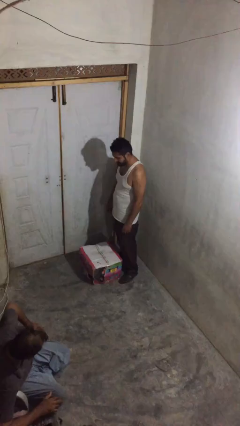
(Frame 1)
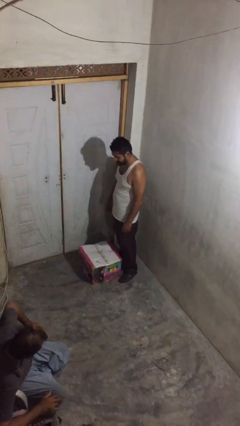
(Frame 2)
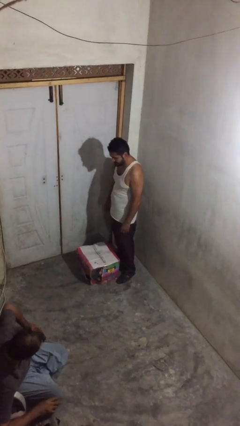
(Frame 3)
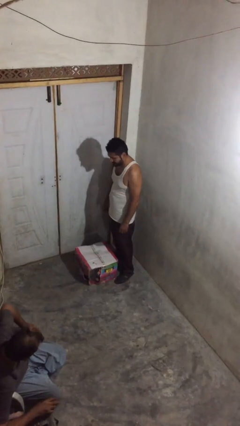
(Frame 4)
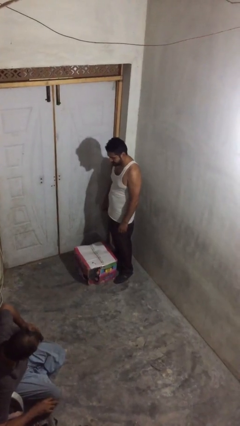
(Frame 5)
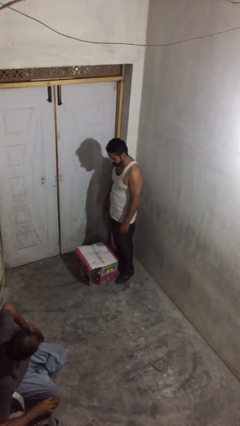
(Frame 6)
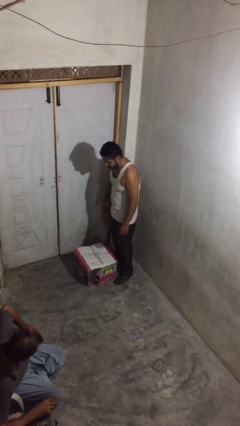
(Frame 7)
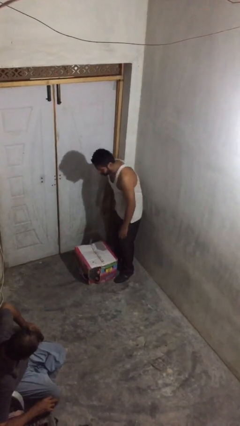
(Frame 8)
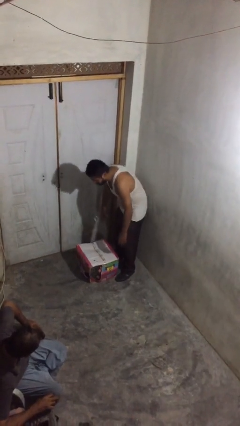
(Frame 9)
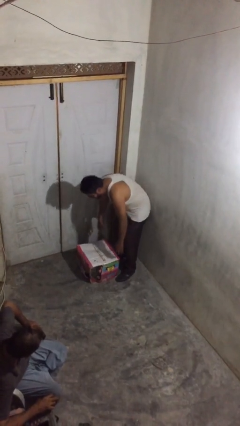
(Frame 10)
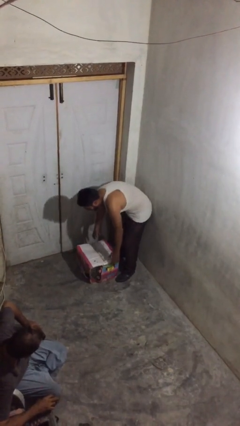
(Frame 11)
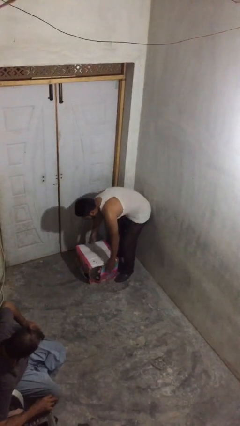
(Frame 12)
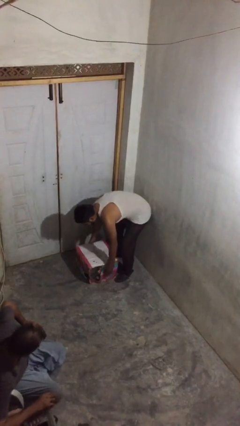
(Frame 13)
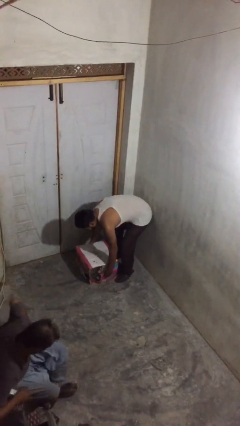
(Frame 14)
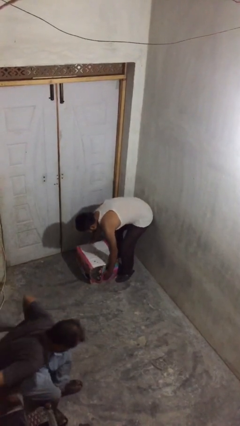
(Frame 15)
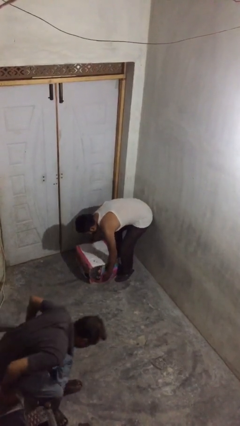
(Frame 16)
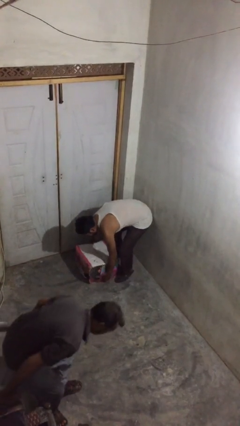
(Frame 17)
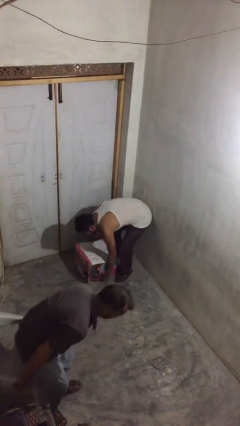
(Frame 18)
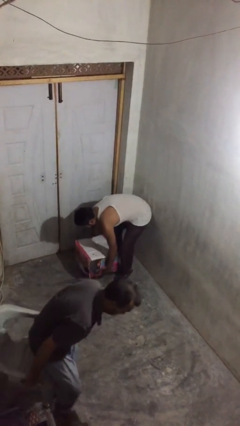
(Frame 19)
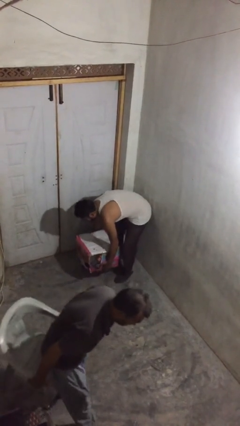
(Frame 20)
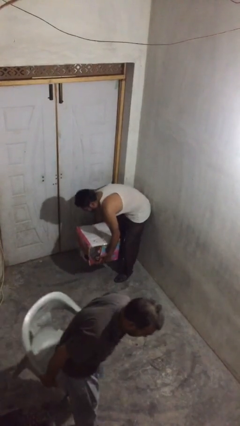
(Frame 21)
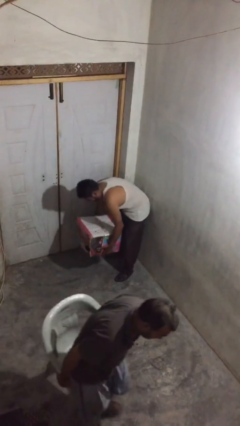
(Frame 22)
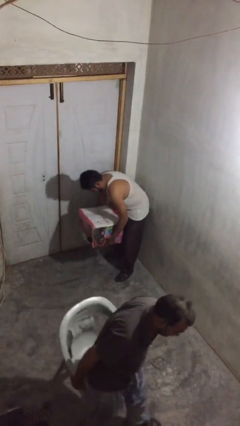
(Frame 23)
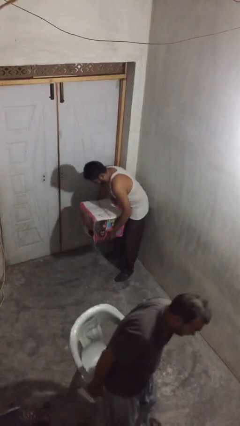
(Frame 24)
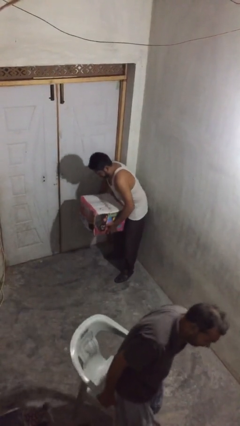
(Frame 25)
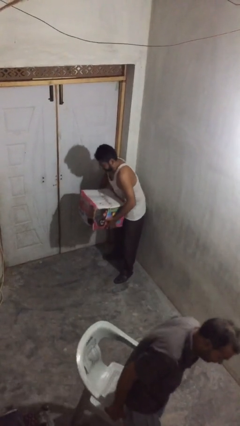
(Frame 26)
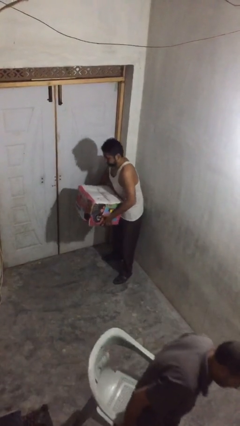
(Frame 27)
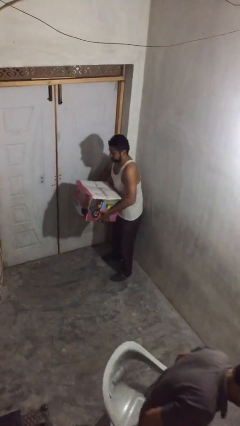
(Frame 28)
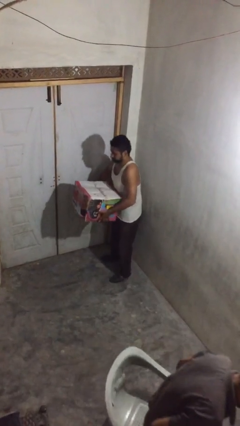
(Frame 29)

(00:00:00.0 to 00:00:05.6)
person picks up object from floor

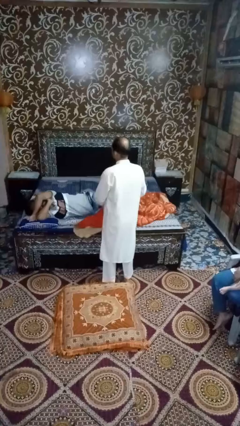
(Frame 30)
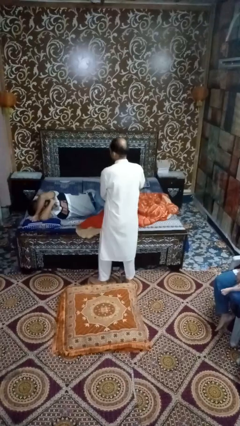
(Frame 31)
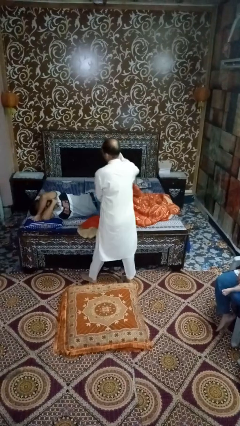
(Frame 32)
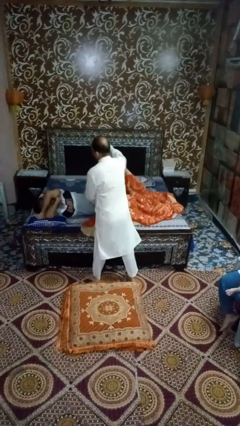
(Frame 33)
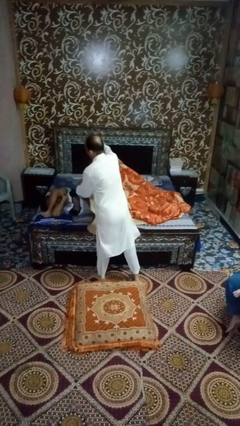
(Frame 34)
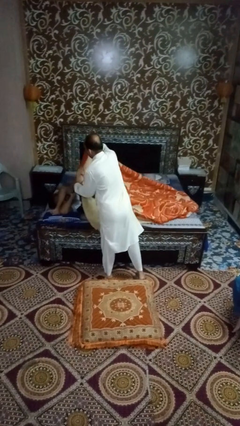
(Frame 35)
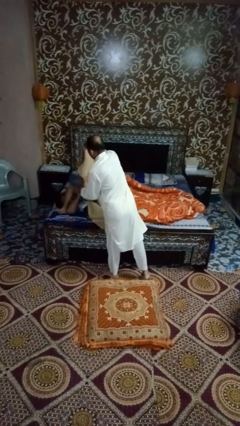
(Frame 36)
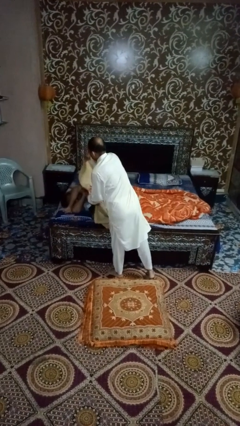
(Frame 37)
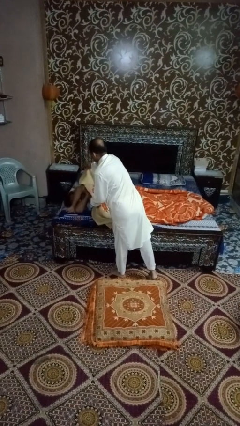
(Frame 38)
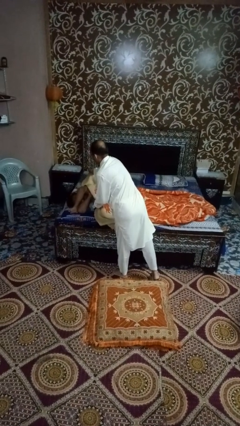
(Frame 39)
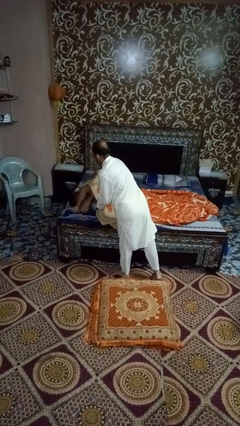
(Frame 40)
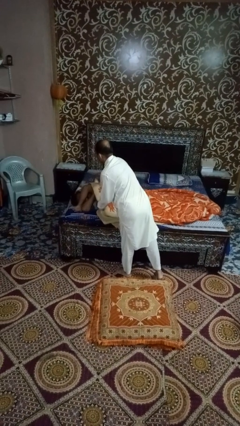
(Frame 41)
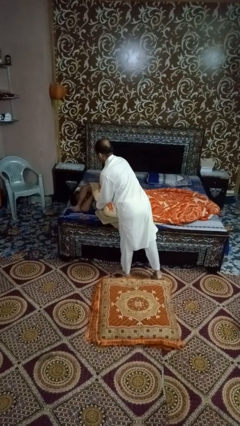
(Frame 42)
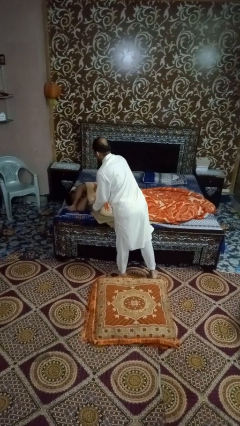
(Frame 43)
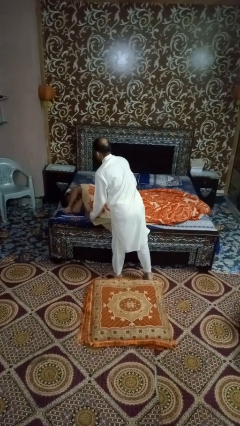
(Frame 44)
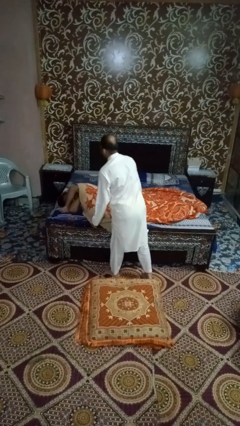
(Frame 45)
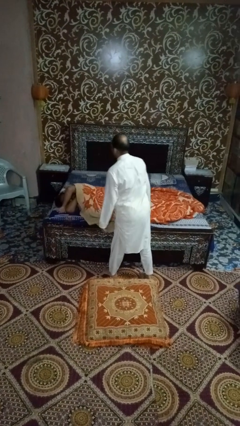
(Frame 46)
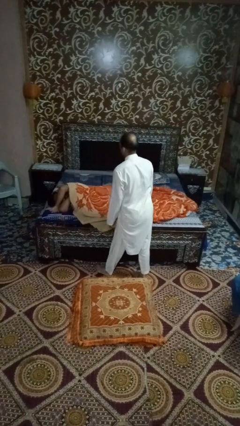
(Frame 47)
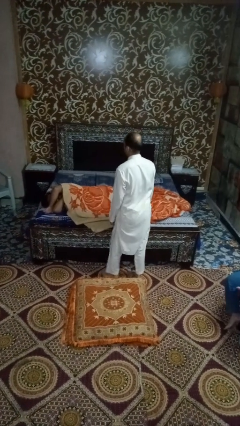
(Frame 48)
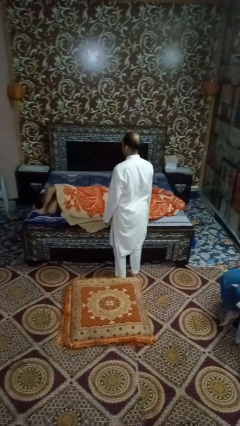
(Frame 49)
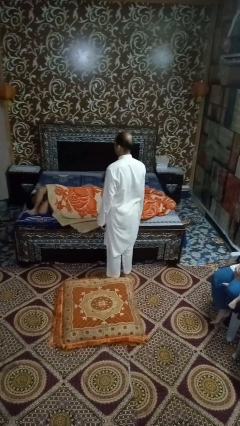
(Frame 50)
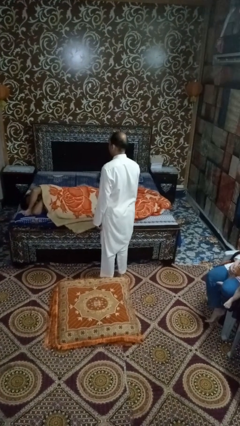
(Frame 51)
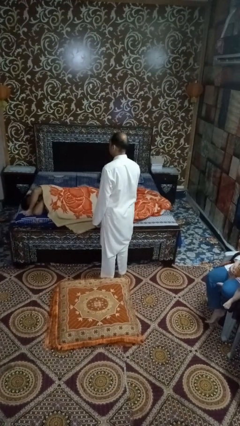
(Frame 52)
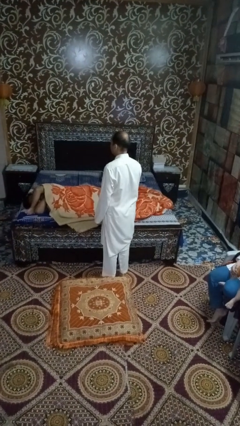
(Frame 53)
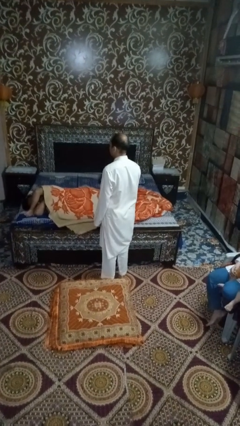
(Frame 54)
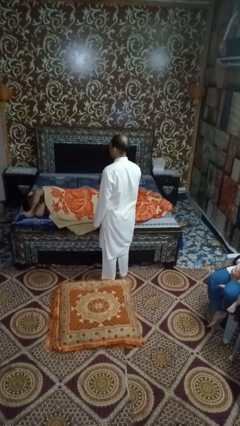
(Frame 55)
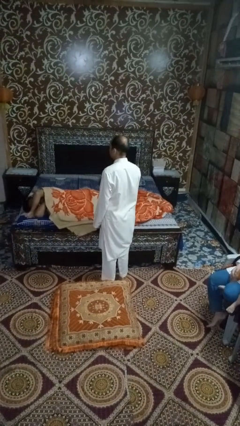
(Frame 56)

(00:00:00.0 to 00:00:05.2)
person covers friend with blanket

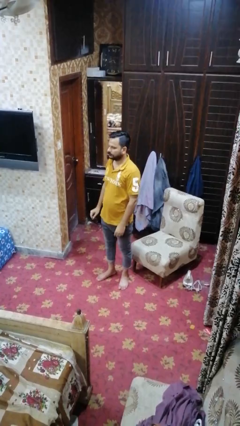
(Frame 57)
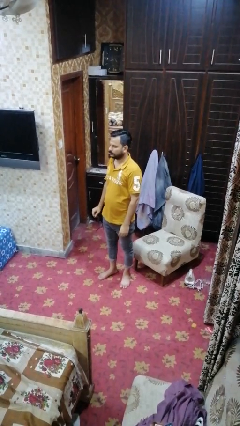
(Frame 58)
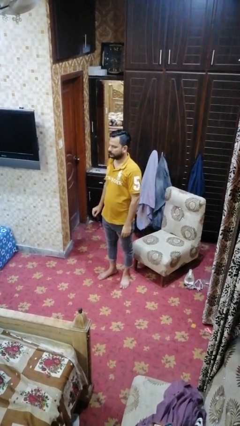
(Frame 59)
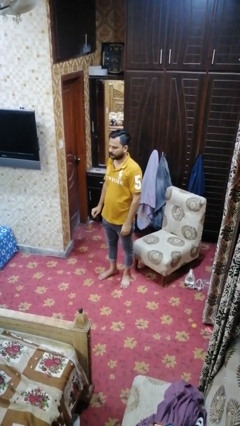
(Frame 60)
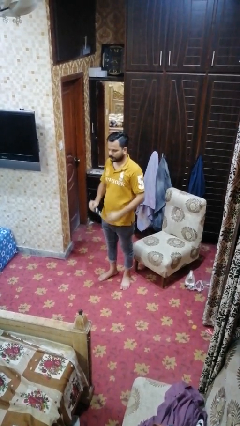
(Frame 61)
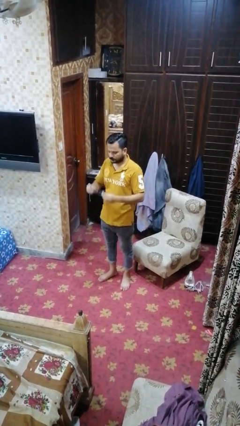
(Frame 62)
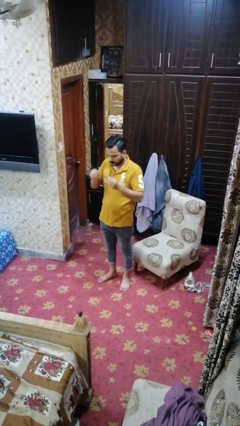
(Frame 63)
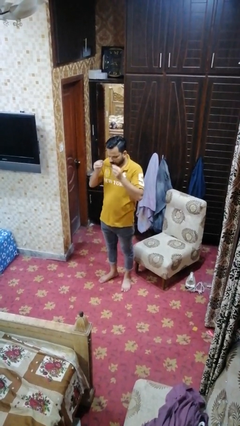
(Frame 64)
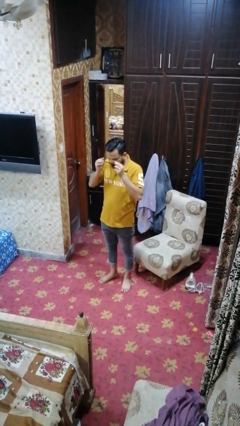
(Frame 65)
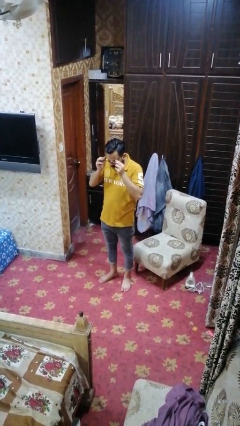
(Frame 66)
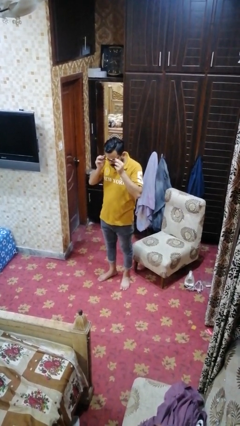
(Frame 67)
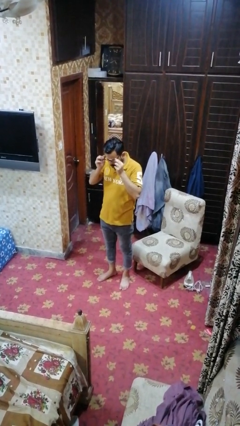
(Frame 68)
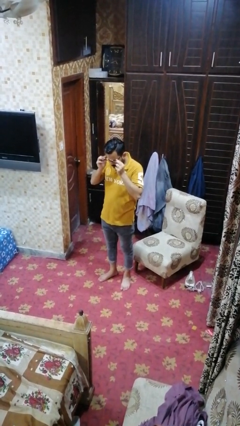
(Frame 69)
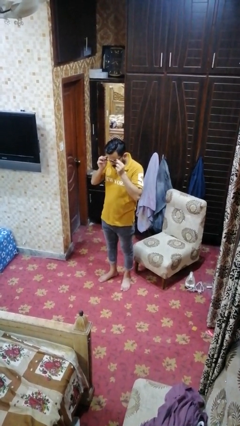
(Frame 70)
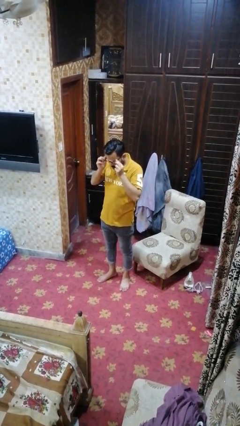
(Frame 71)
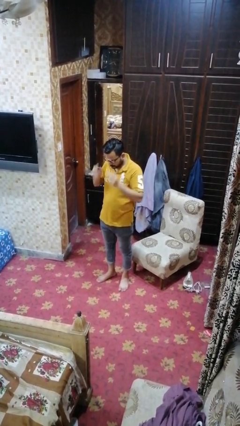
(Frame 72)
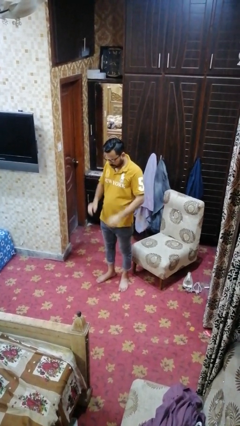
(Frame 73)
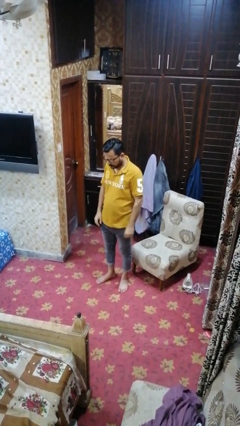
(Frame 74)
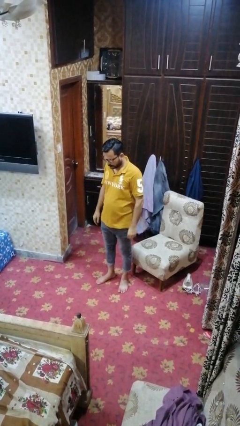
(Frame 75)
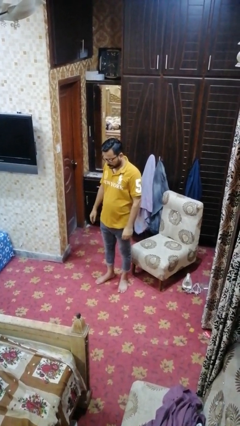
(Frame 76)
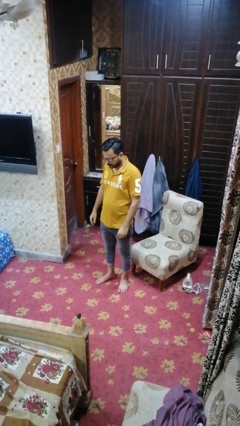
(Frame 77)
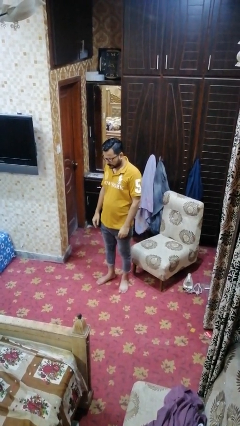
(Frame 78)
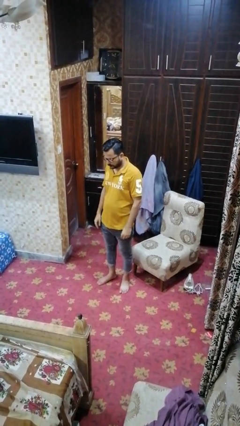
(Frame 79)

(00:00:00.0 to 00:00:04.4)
person puts on glasses

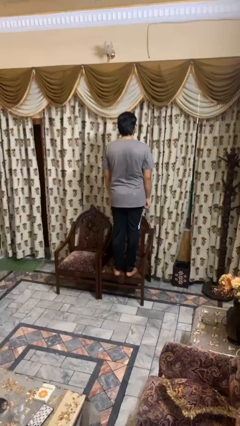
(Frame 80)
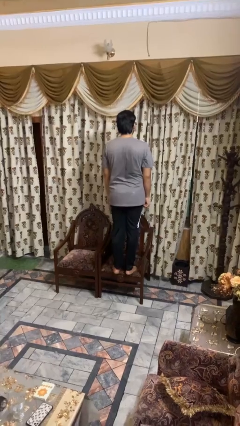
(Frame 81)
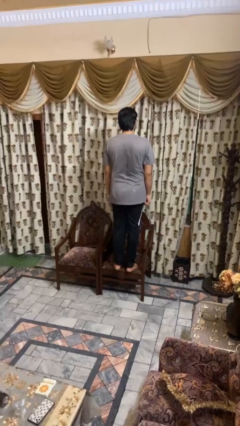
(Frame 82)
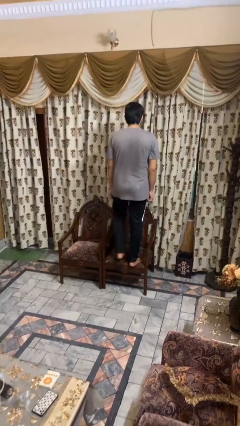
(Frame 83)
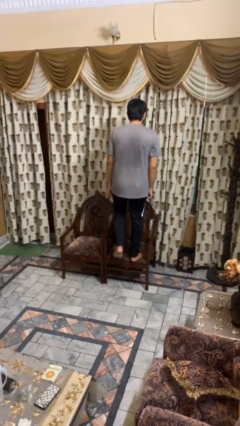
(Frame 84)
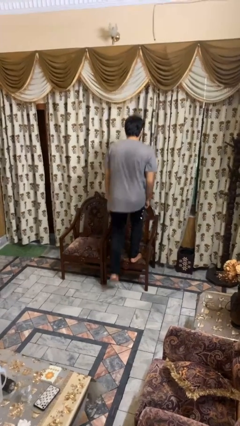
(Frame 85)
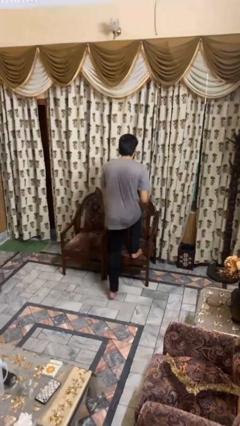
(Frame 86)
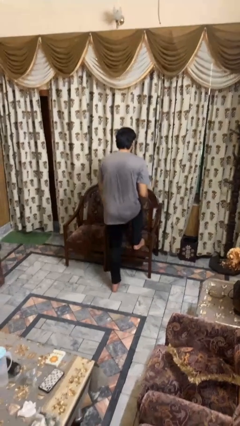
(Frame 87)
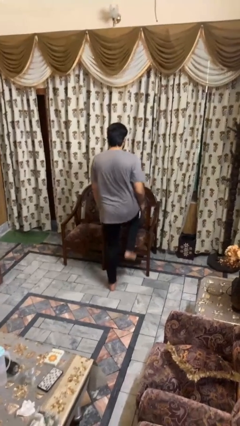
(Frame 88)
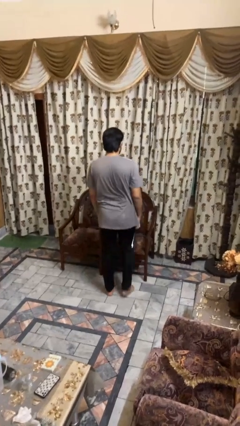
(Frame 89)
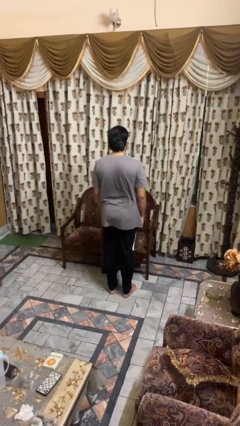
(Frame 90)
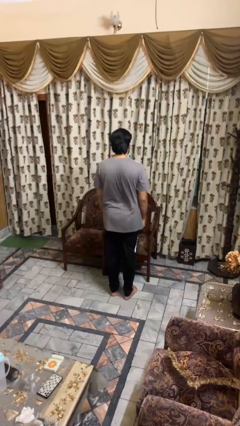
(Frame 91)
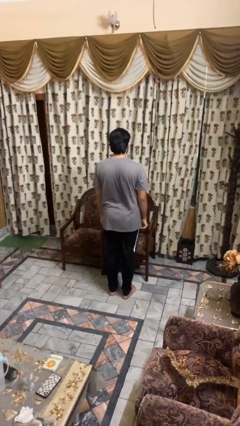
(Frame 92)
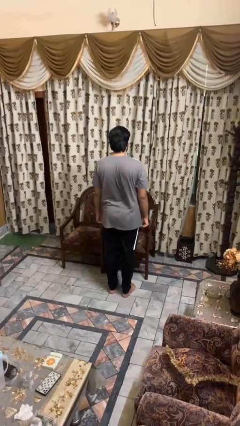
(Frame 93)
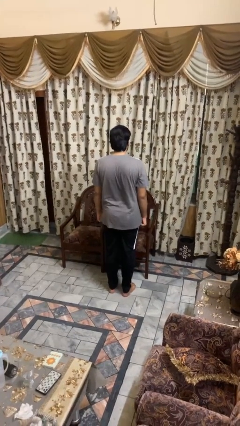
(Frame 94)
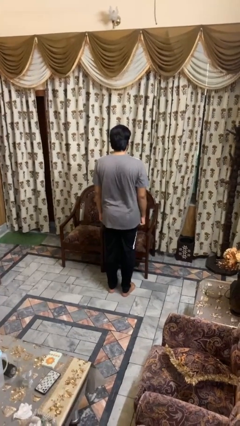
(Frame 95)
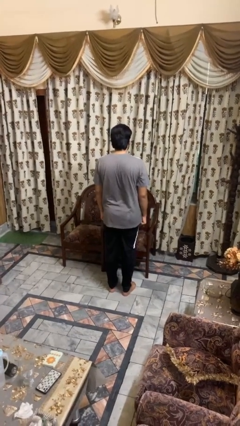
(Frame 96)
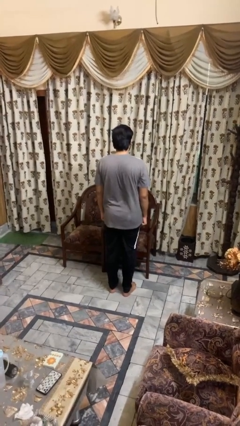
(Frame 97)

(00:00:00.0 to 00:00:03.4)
person climbs off chair
